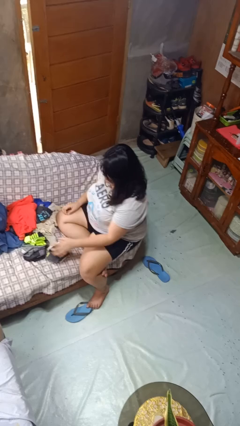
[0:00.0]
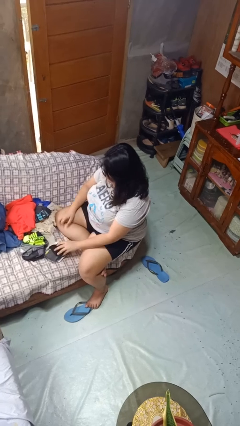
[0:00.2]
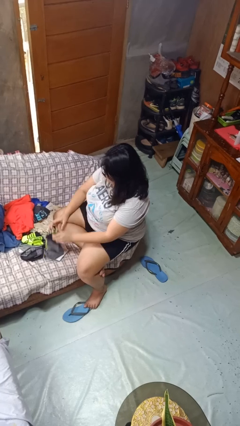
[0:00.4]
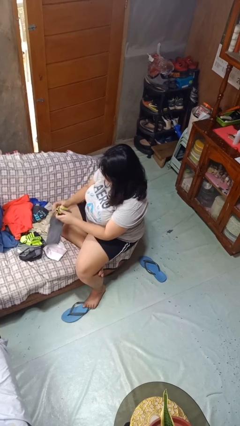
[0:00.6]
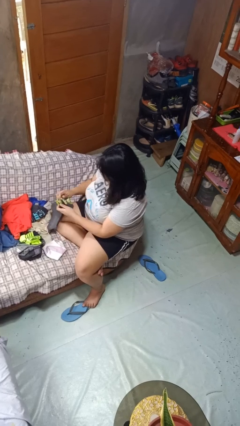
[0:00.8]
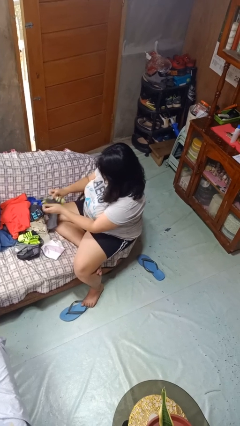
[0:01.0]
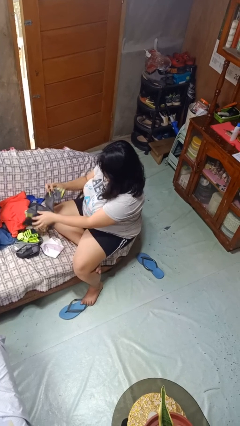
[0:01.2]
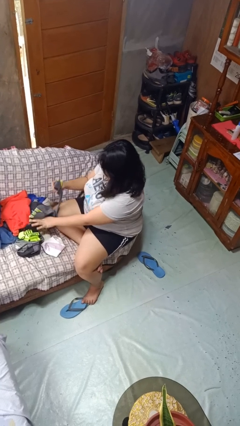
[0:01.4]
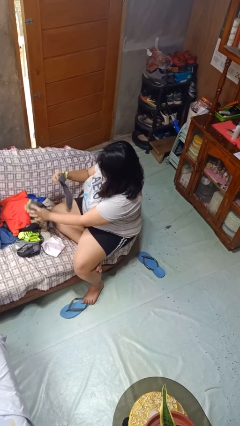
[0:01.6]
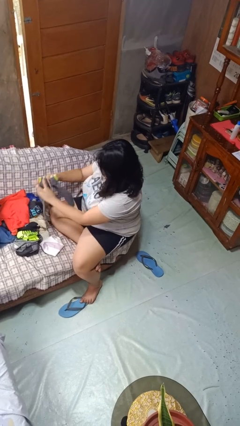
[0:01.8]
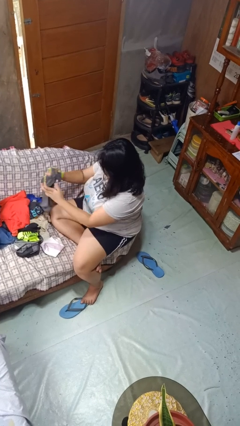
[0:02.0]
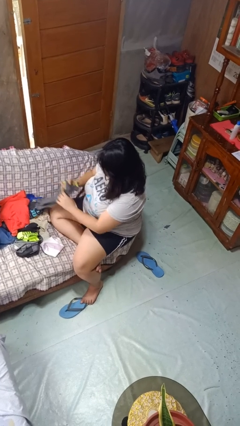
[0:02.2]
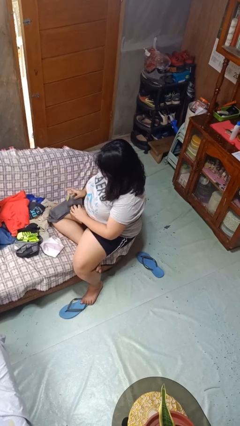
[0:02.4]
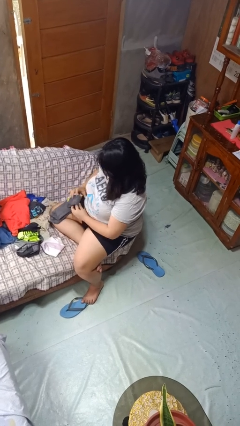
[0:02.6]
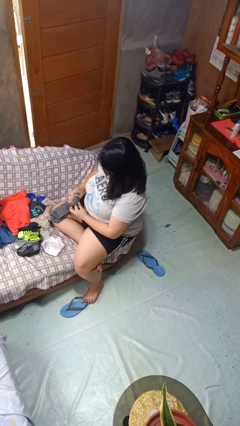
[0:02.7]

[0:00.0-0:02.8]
person folds socks

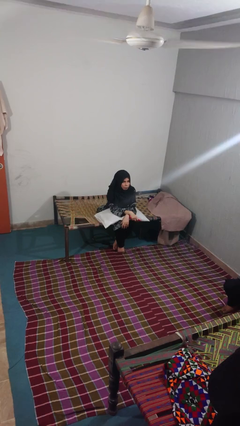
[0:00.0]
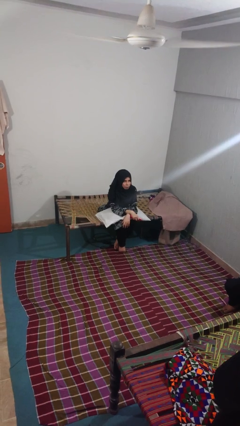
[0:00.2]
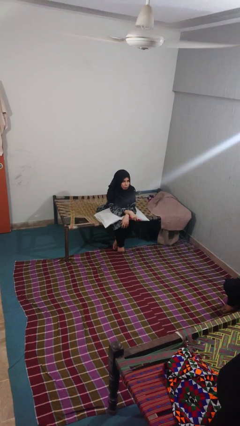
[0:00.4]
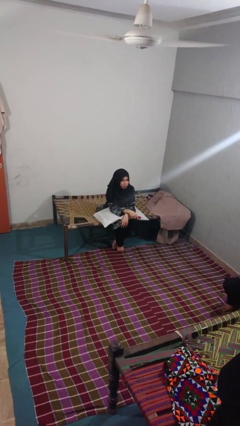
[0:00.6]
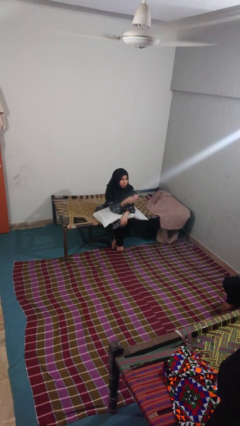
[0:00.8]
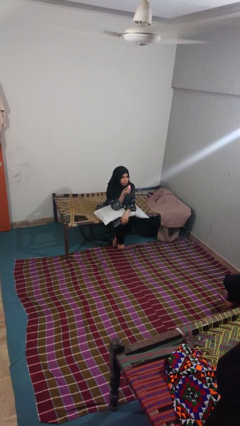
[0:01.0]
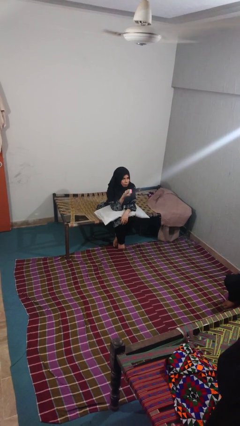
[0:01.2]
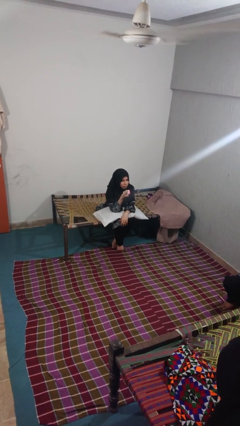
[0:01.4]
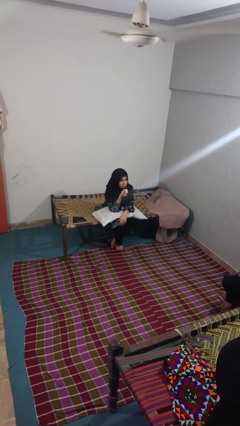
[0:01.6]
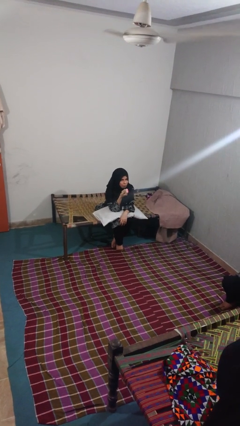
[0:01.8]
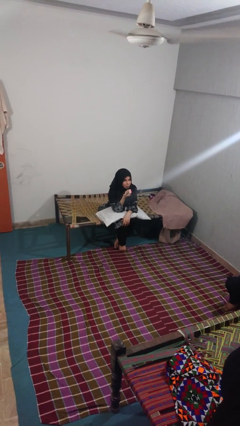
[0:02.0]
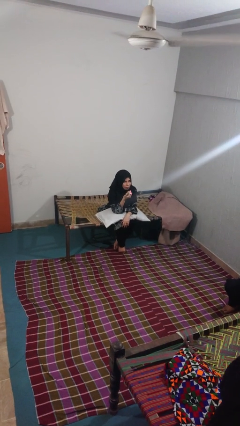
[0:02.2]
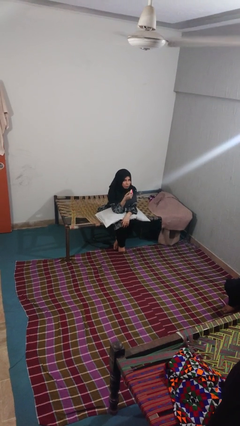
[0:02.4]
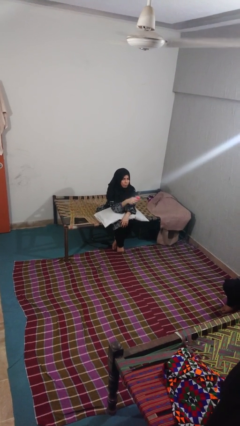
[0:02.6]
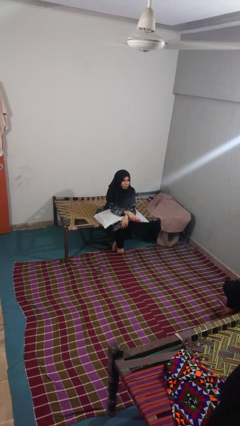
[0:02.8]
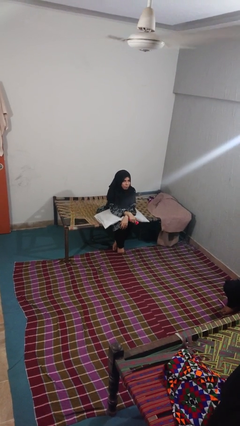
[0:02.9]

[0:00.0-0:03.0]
person uses television remote

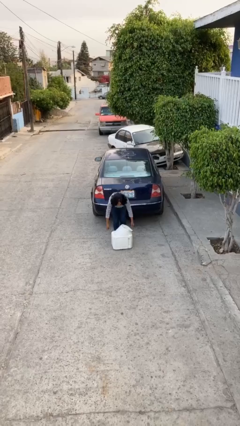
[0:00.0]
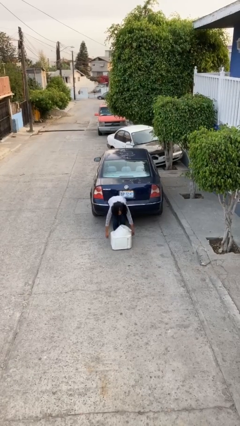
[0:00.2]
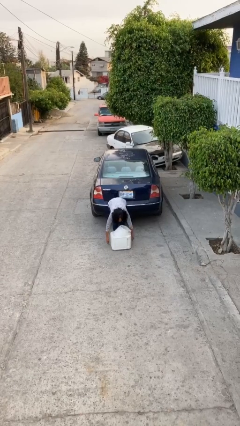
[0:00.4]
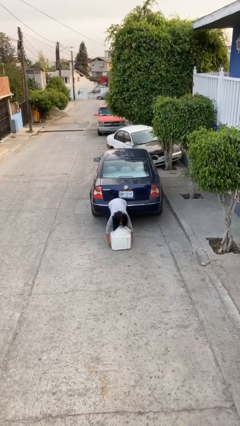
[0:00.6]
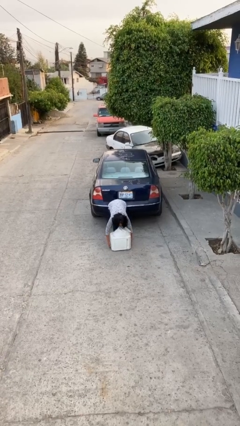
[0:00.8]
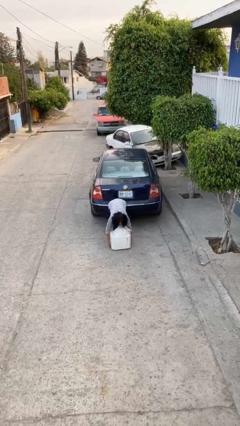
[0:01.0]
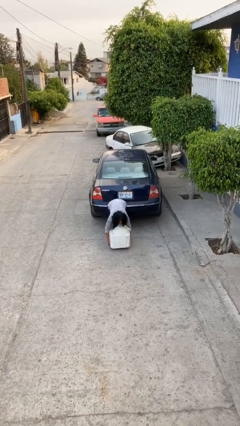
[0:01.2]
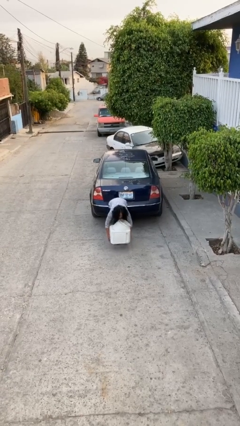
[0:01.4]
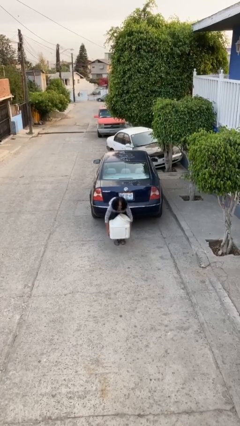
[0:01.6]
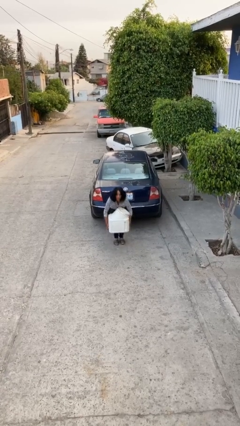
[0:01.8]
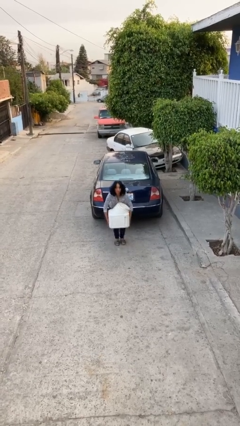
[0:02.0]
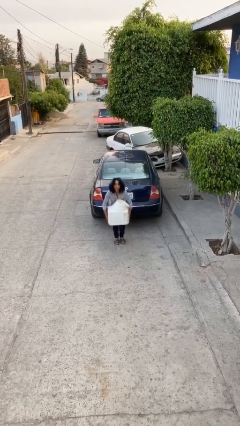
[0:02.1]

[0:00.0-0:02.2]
person picks up object from floor

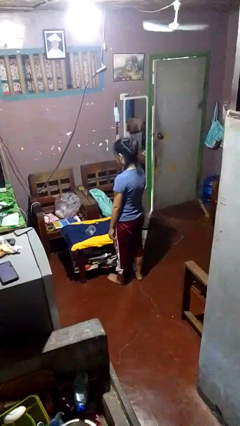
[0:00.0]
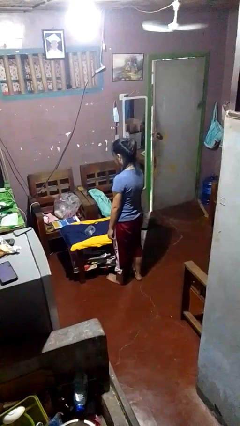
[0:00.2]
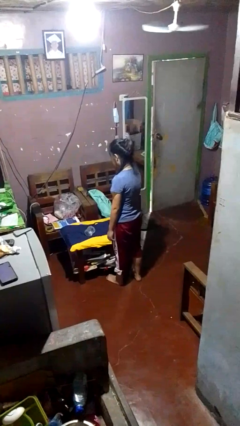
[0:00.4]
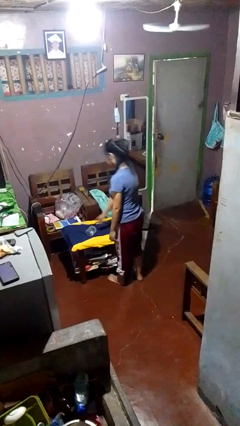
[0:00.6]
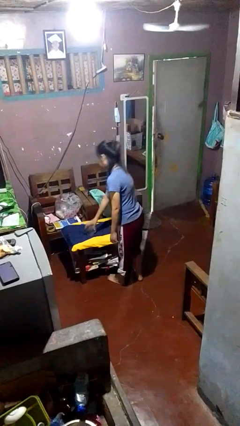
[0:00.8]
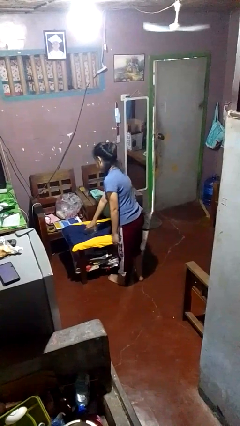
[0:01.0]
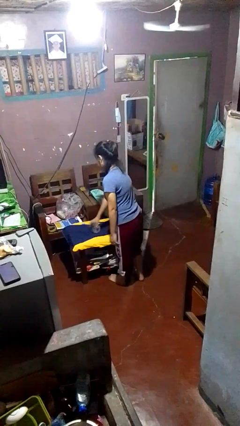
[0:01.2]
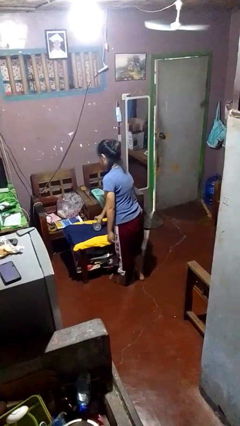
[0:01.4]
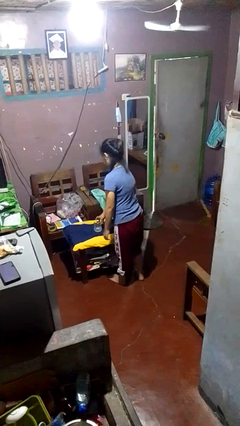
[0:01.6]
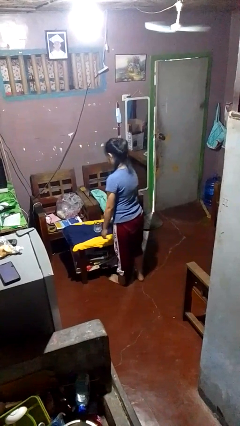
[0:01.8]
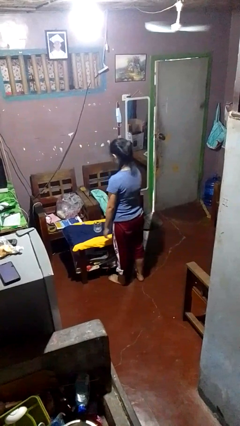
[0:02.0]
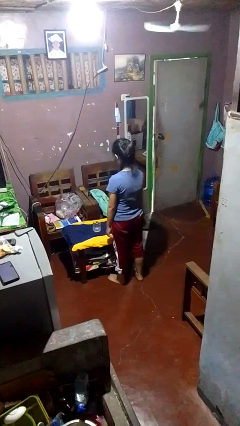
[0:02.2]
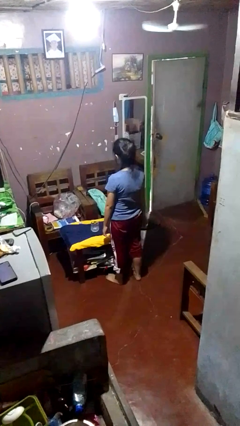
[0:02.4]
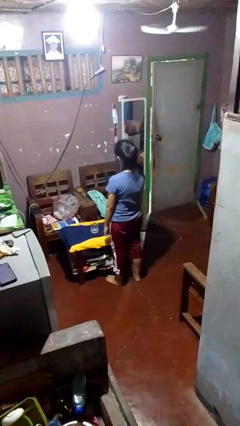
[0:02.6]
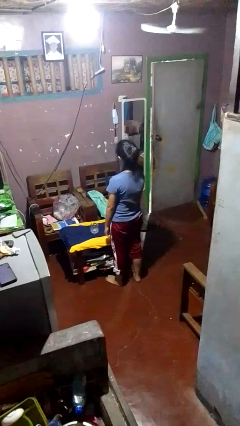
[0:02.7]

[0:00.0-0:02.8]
person sets upright glass

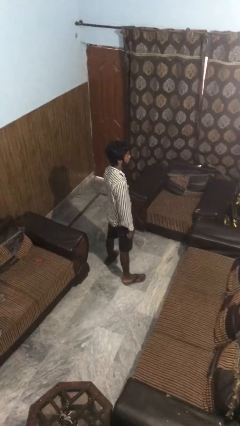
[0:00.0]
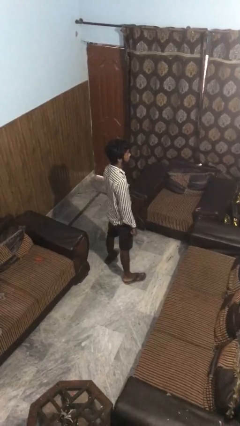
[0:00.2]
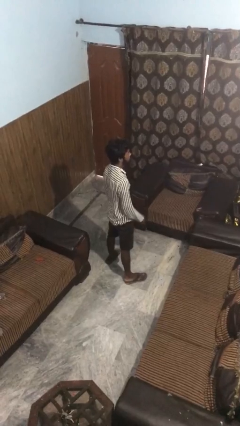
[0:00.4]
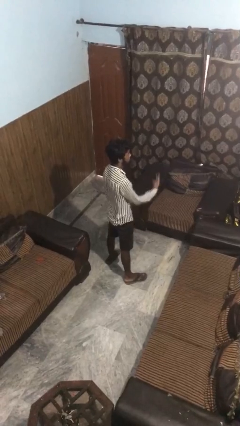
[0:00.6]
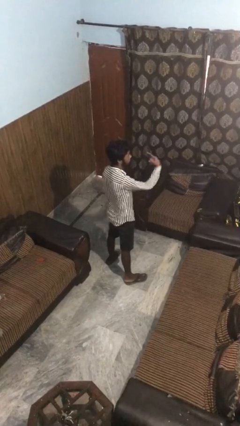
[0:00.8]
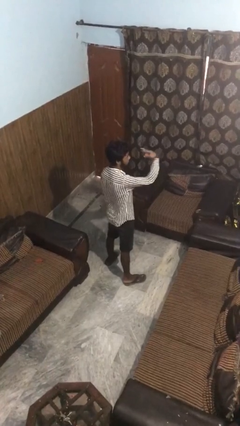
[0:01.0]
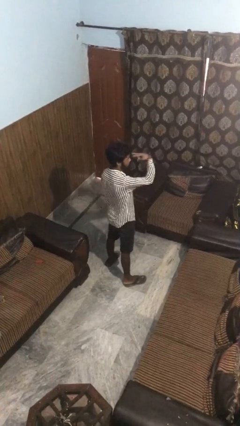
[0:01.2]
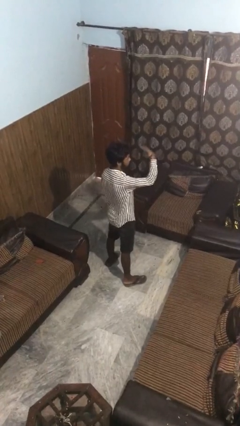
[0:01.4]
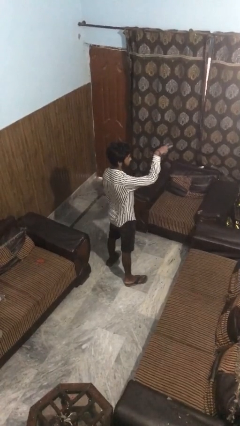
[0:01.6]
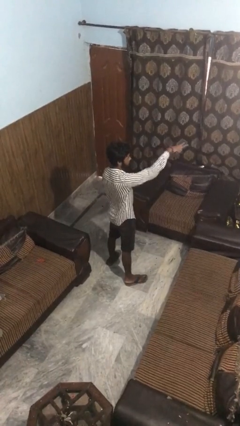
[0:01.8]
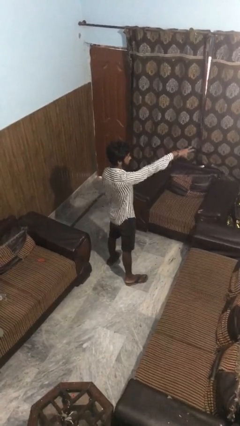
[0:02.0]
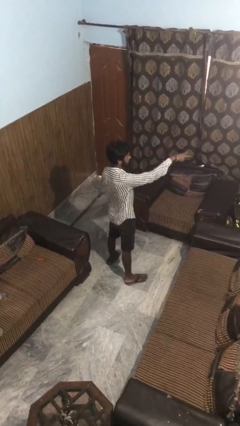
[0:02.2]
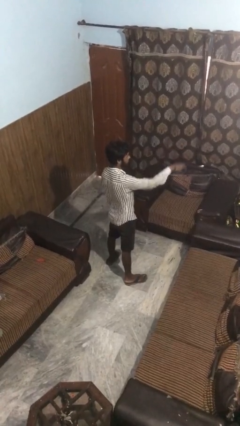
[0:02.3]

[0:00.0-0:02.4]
person gestures watch closely

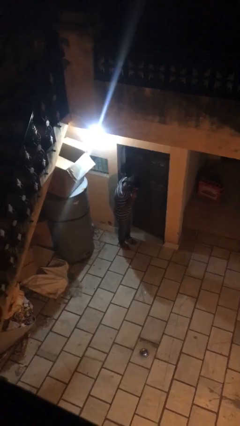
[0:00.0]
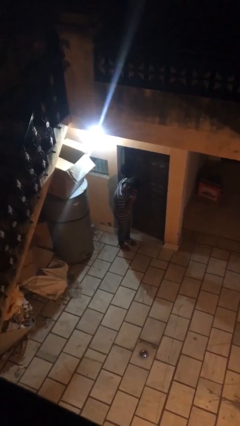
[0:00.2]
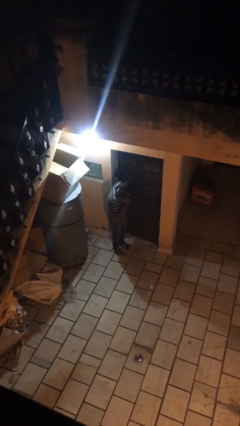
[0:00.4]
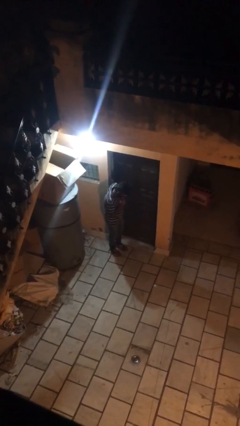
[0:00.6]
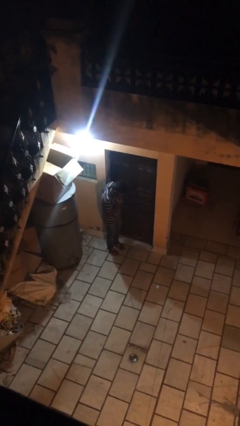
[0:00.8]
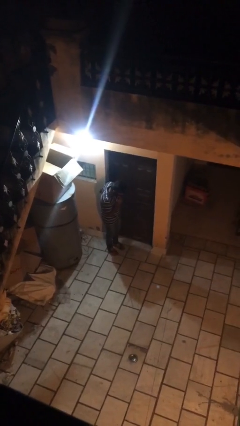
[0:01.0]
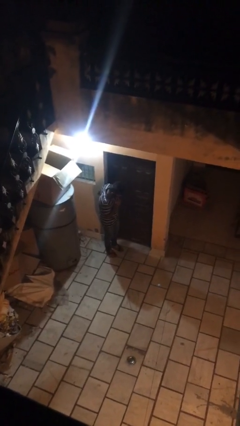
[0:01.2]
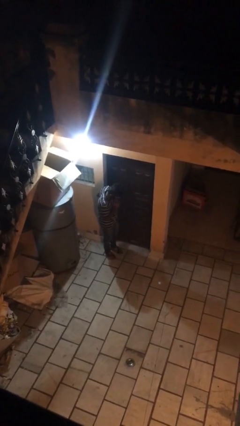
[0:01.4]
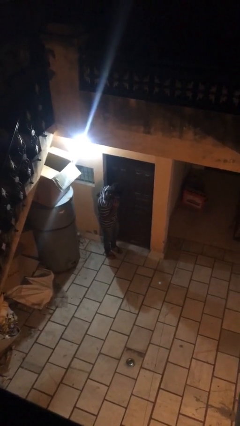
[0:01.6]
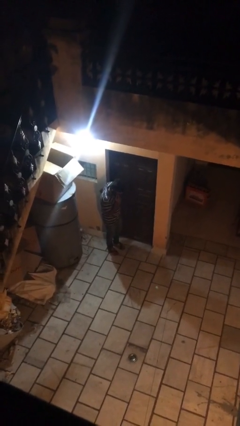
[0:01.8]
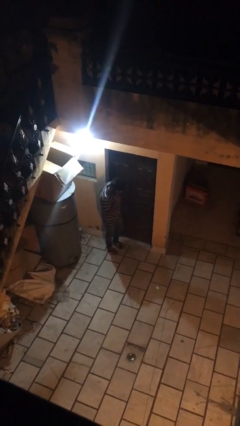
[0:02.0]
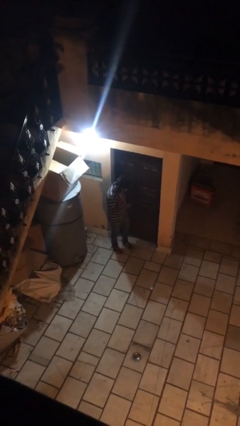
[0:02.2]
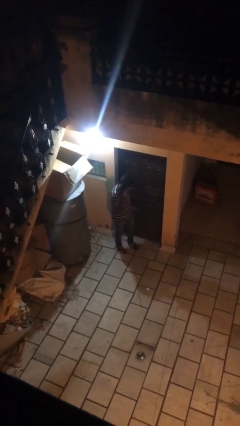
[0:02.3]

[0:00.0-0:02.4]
person closes facility door

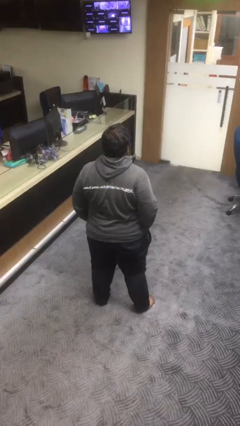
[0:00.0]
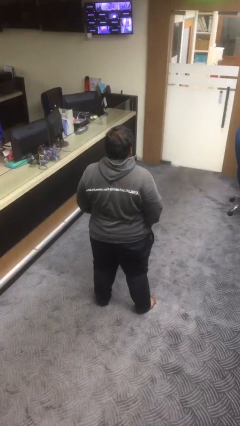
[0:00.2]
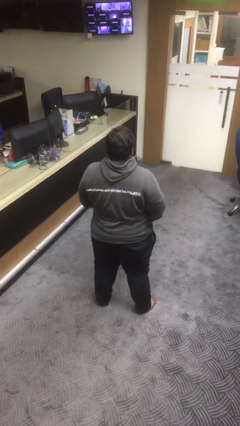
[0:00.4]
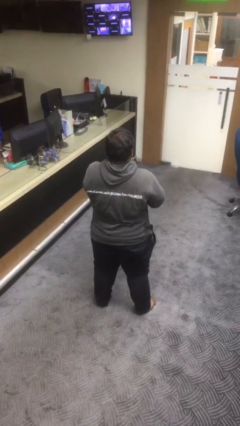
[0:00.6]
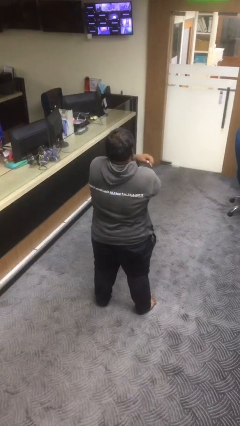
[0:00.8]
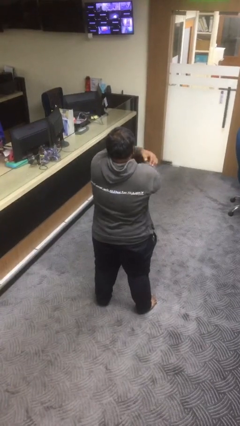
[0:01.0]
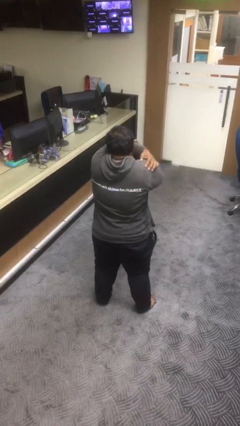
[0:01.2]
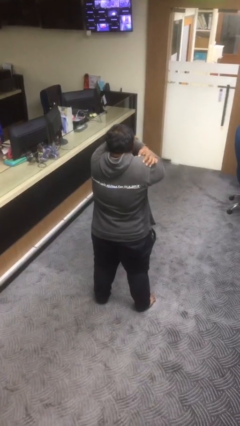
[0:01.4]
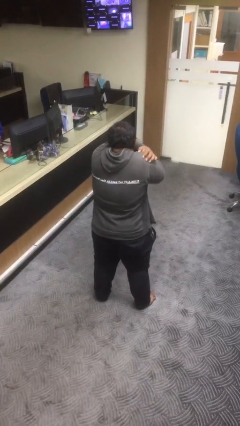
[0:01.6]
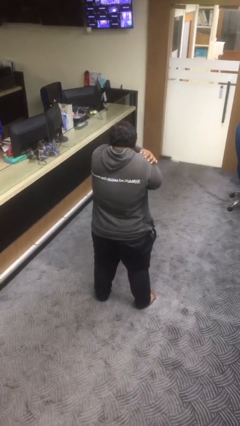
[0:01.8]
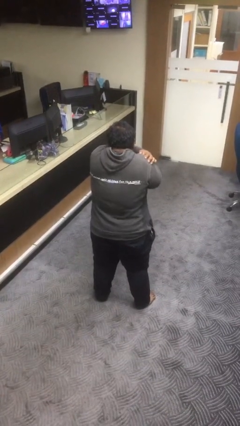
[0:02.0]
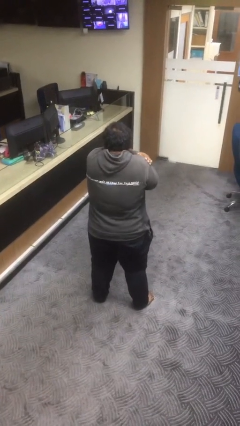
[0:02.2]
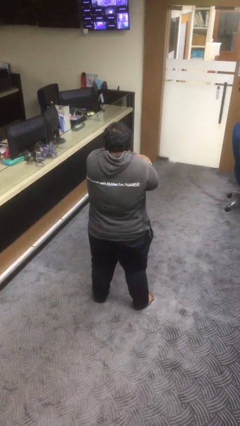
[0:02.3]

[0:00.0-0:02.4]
person sneezes into arm
